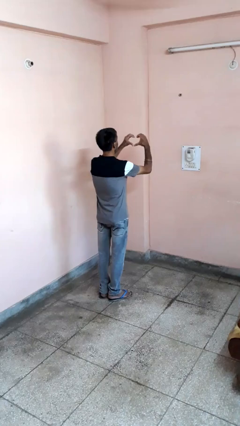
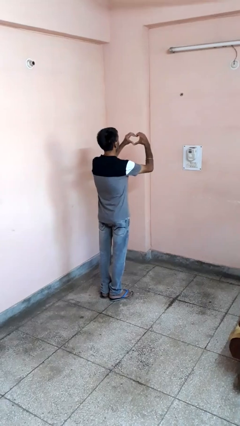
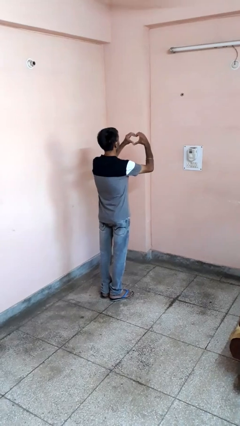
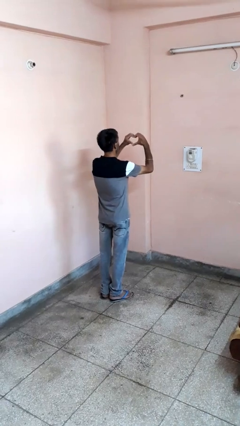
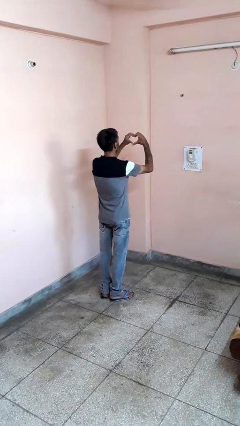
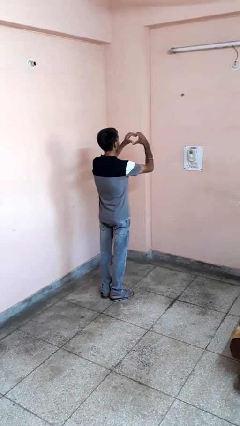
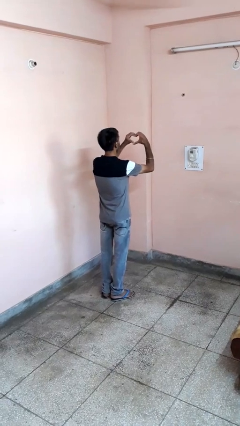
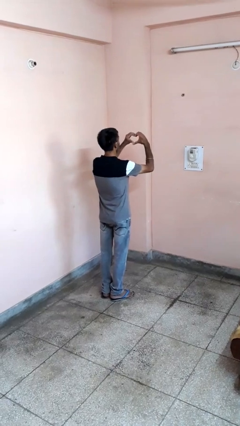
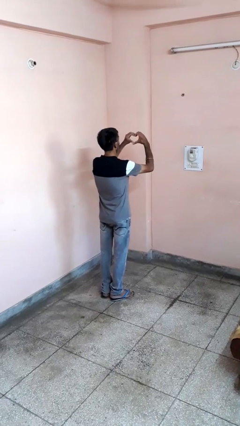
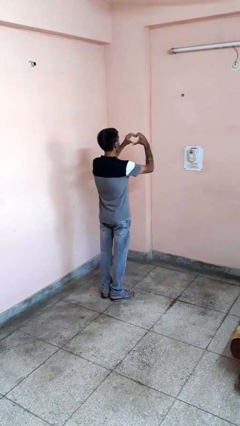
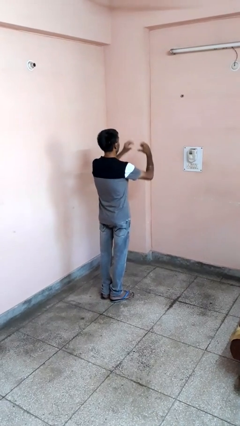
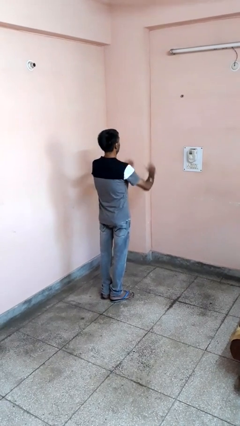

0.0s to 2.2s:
person gestures heart

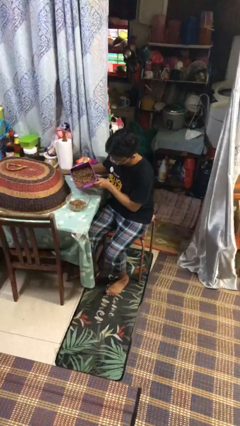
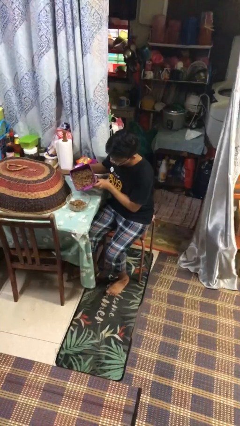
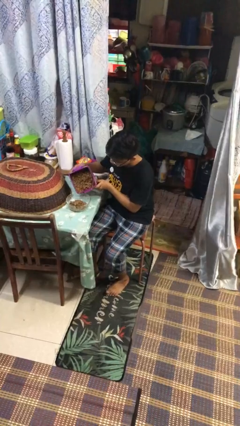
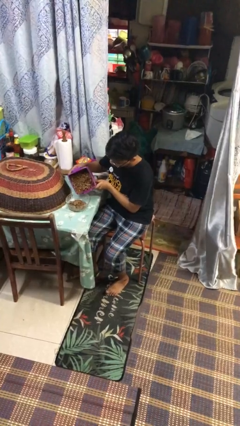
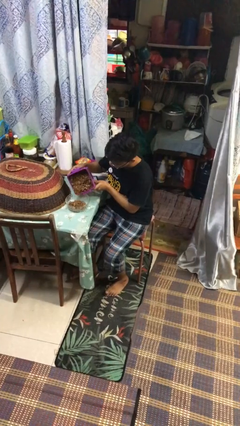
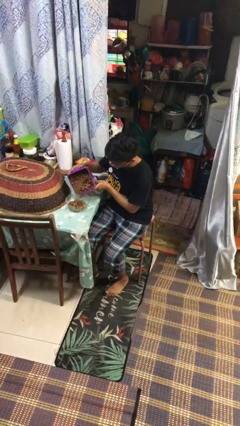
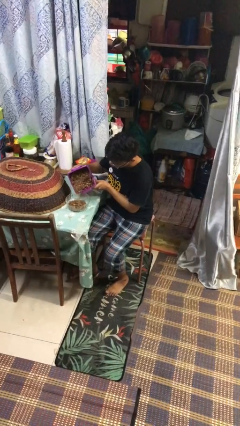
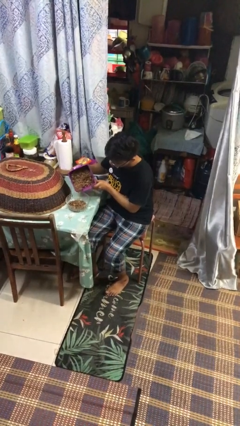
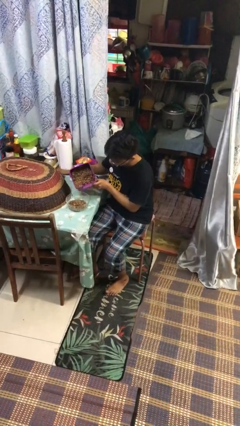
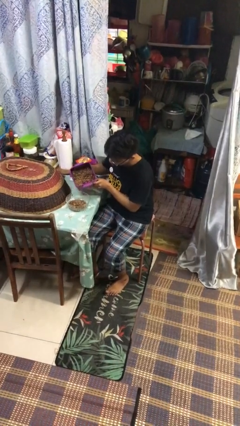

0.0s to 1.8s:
person pours into bowl

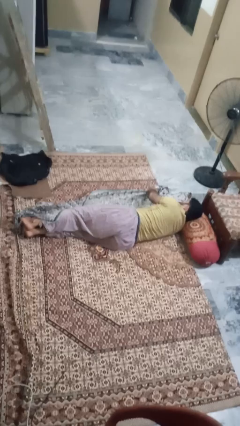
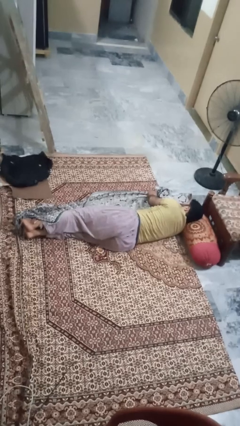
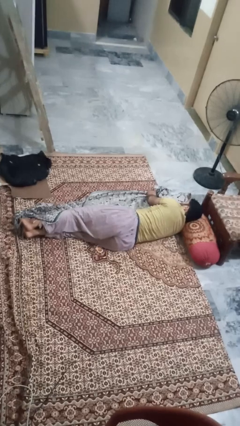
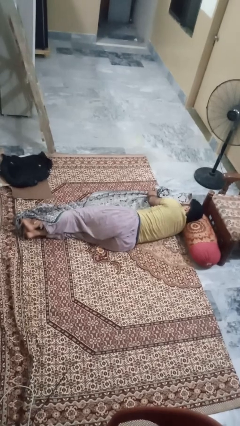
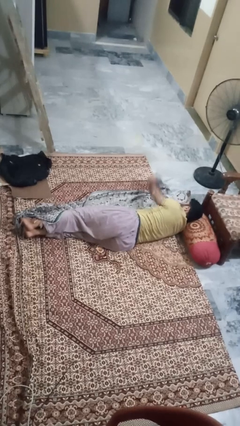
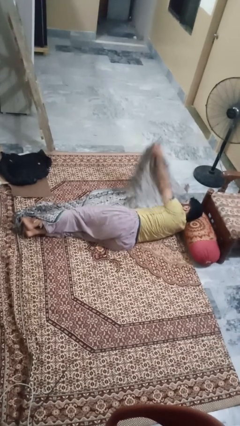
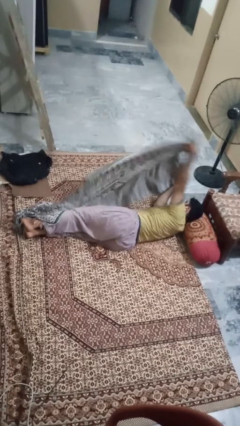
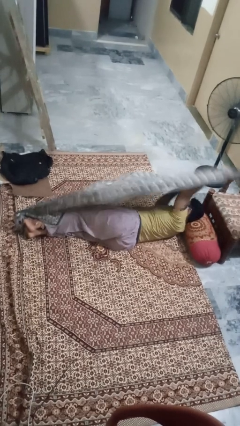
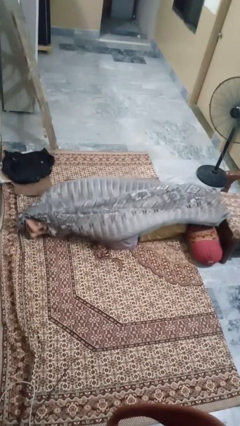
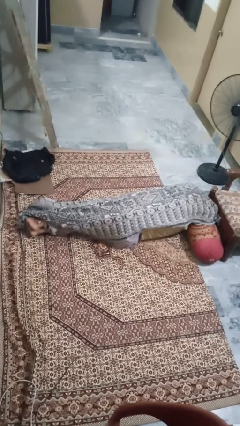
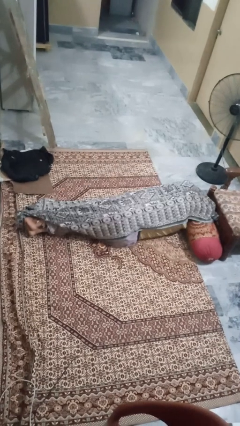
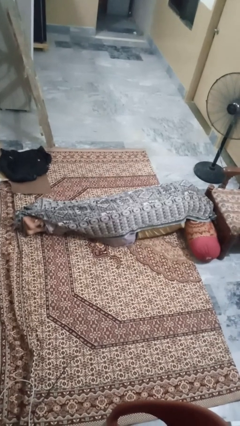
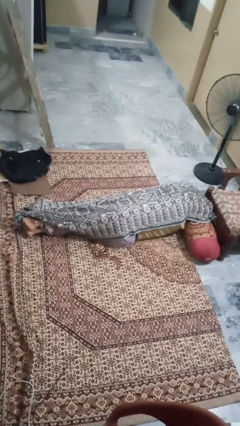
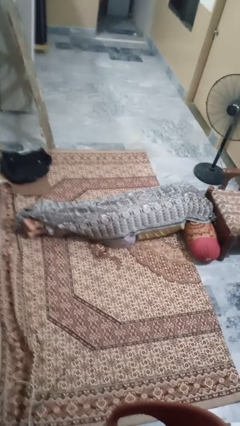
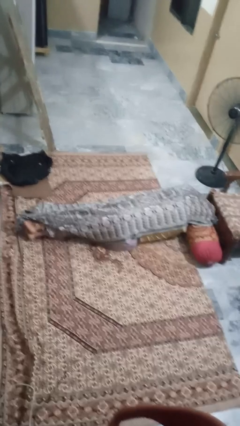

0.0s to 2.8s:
person covers with blanket

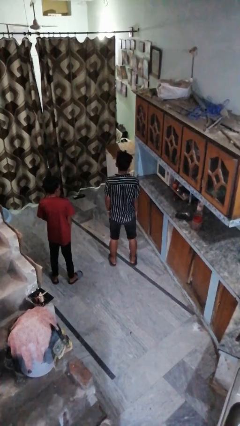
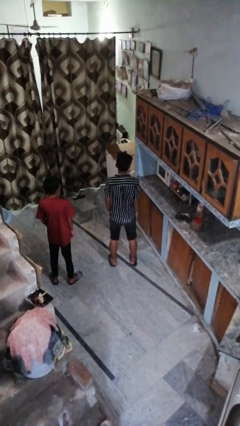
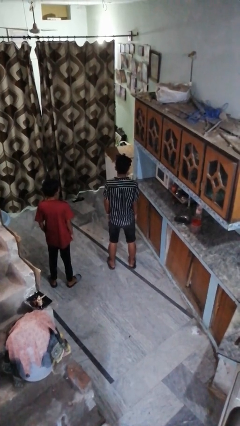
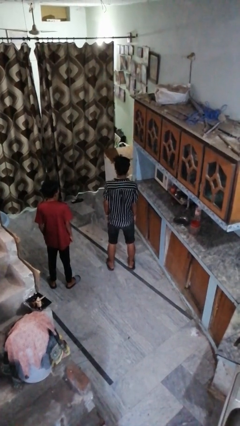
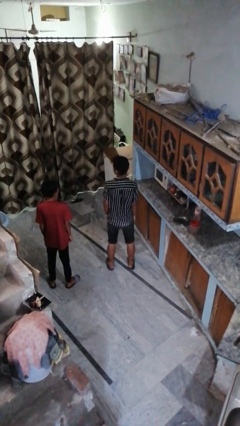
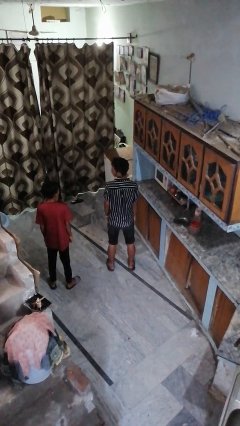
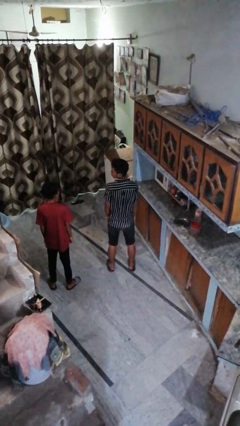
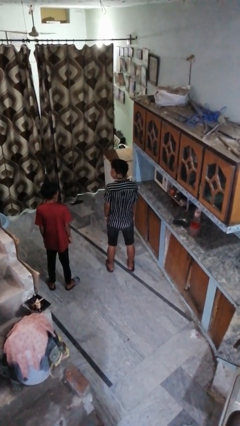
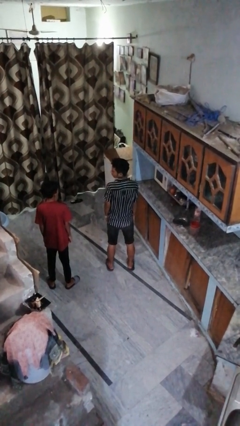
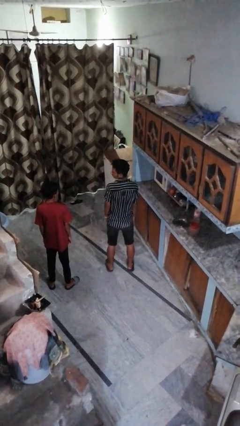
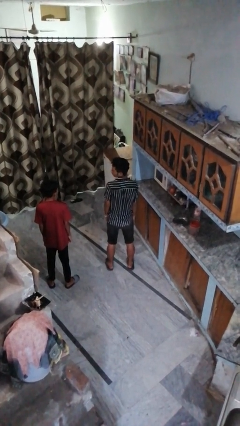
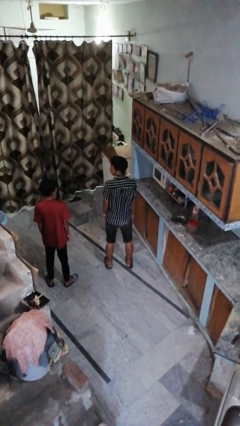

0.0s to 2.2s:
person looks over shoulder

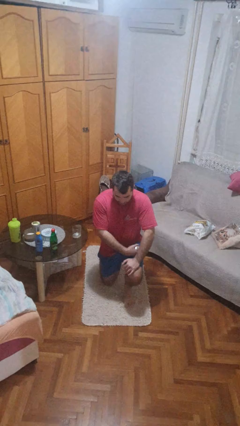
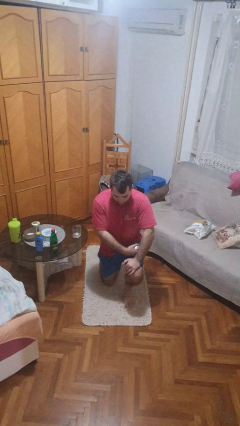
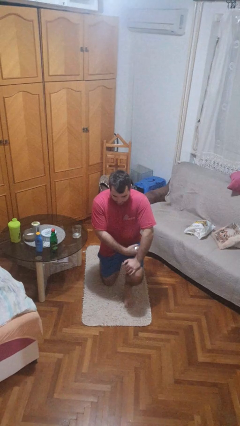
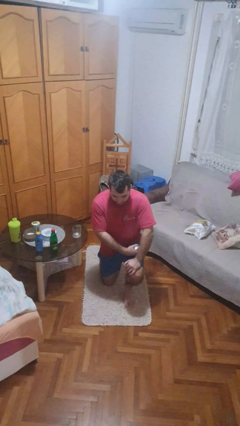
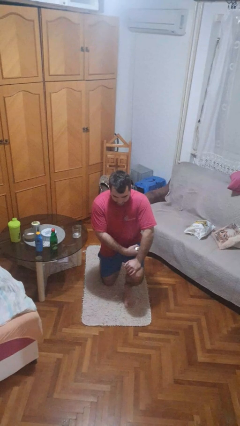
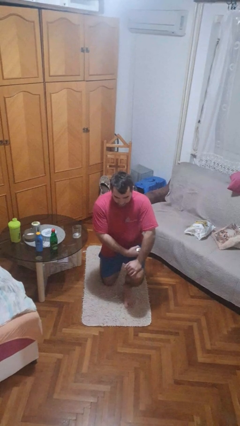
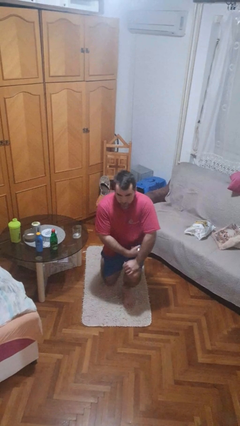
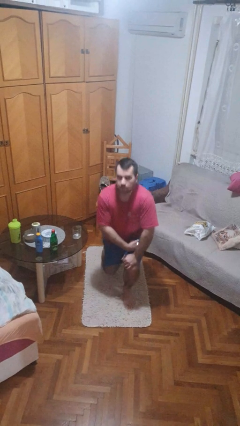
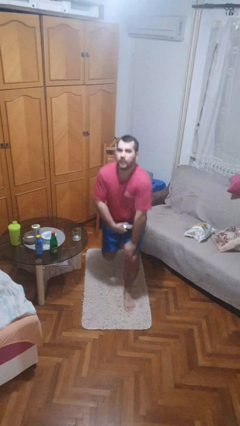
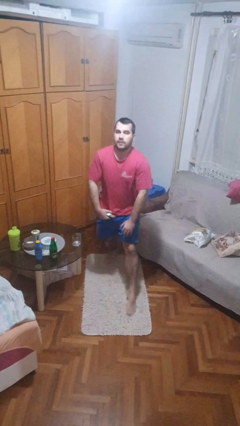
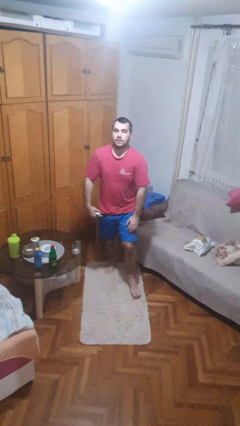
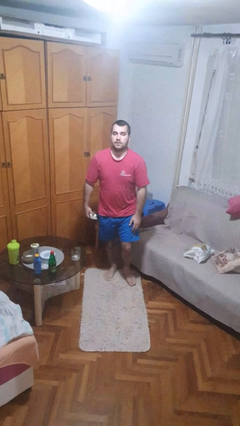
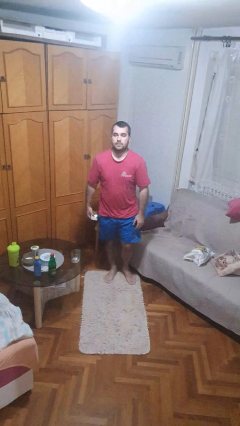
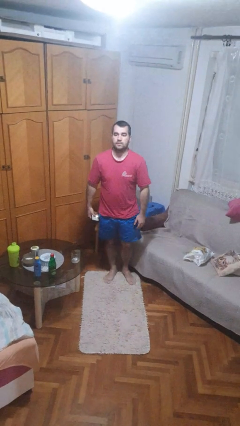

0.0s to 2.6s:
person stands up from floor

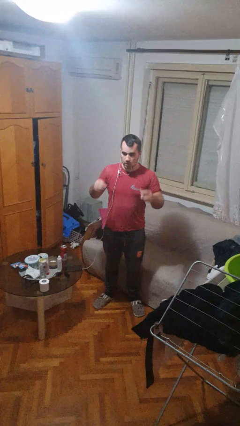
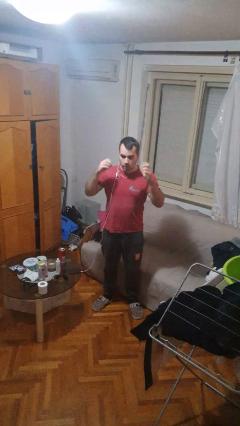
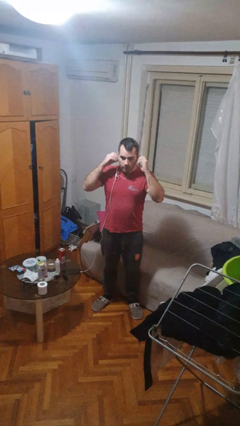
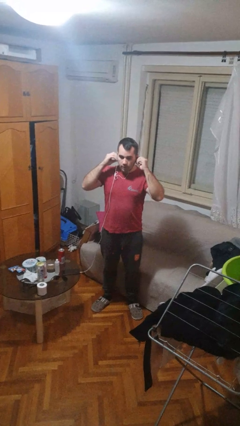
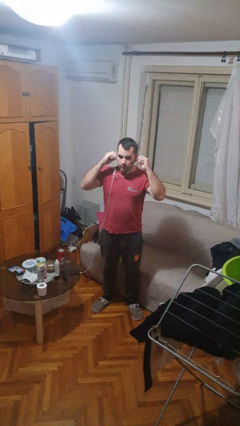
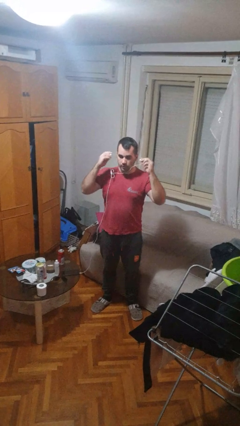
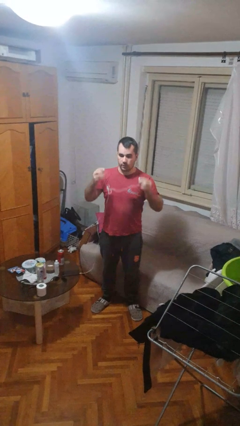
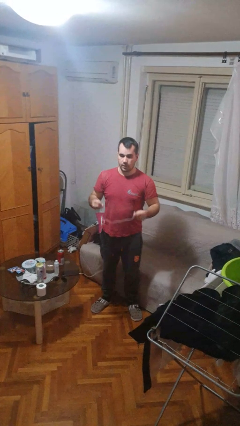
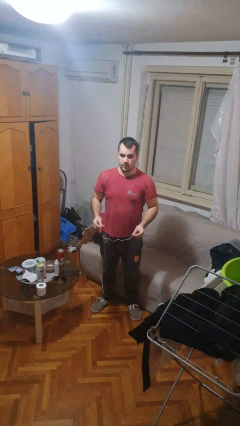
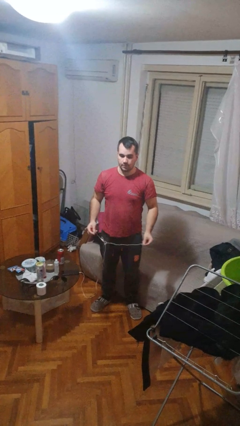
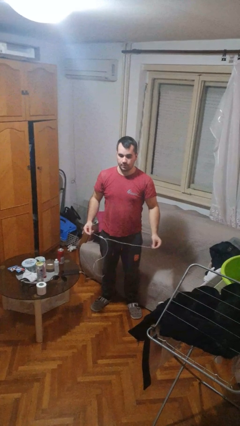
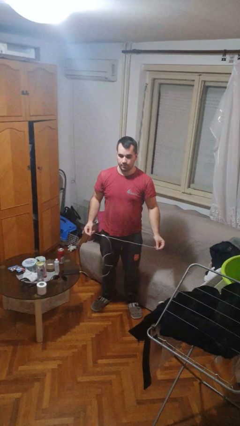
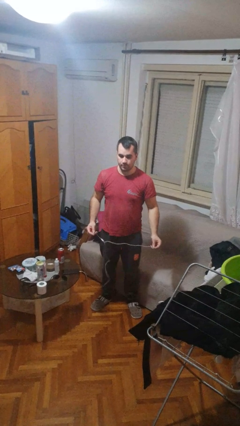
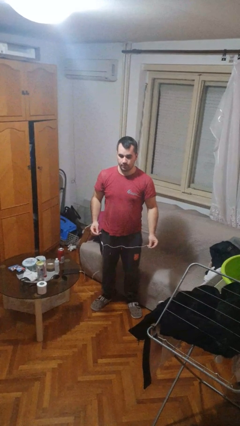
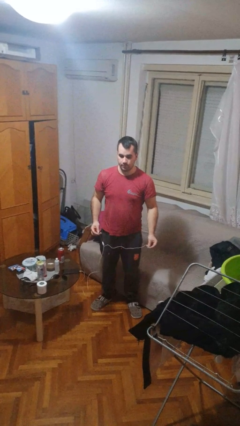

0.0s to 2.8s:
person takes off headphones

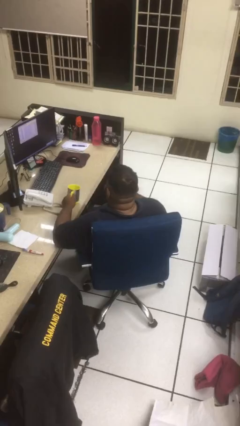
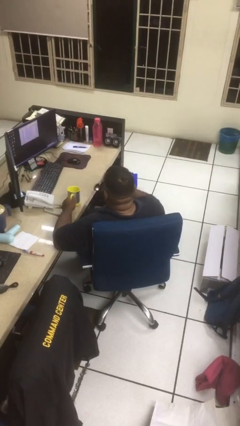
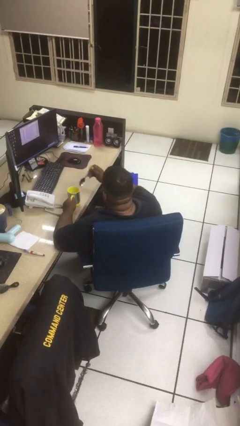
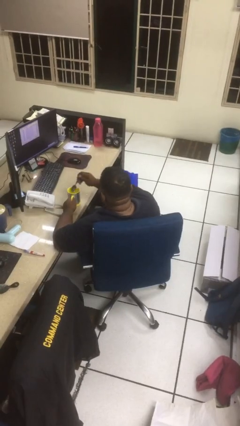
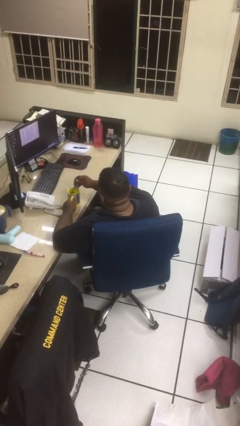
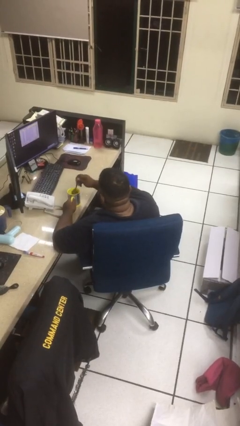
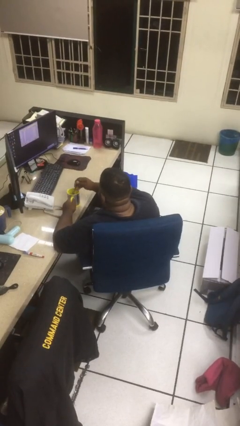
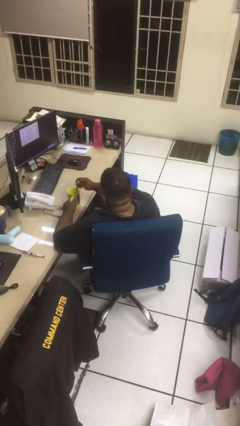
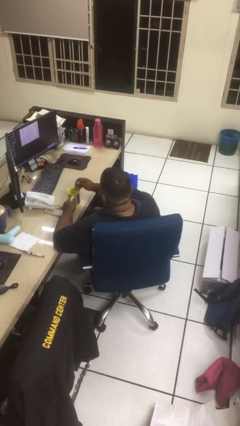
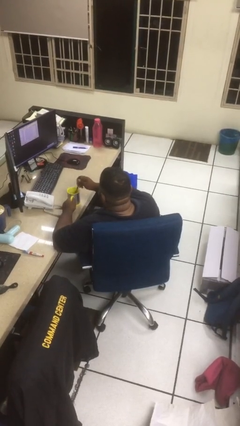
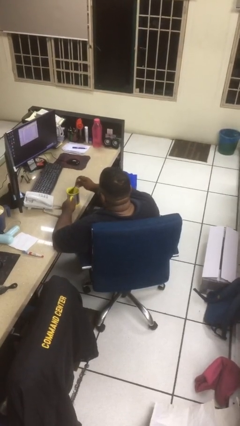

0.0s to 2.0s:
person stirs mug

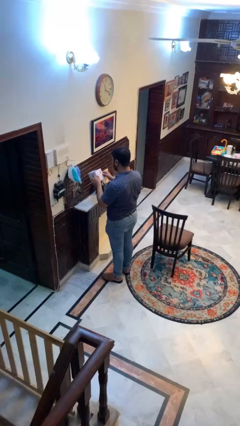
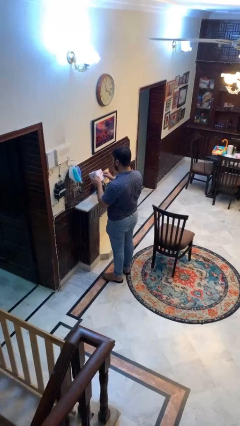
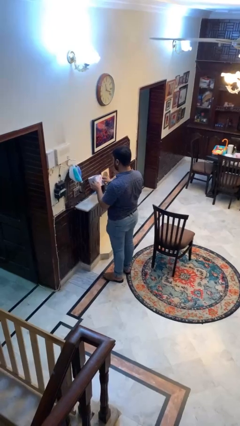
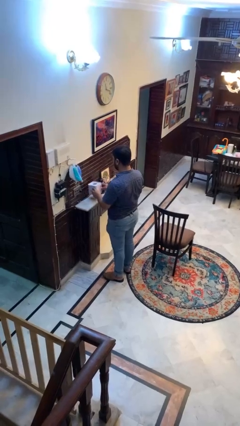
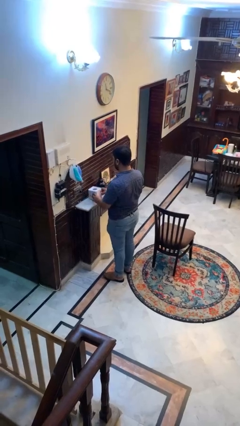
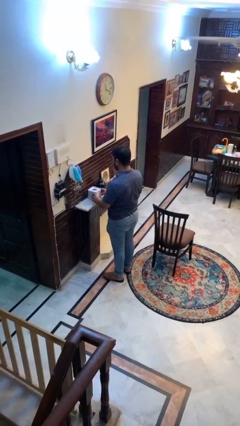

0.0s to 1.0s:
person puts down object on countertop
